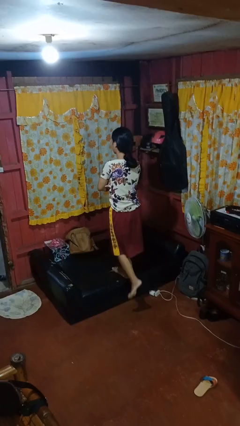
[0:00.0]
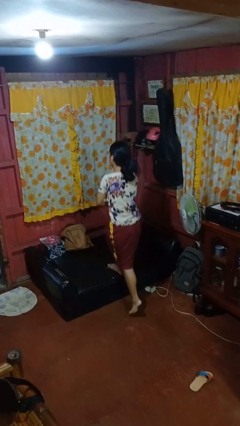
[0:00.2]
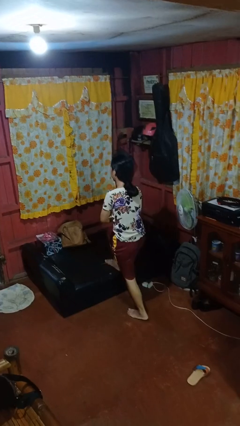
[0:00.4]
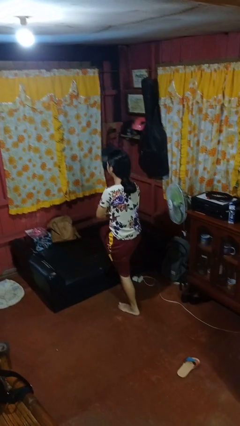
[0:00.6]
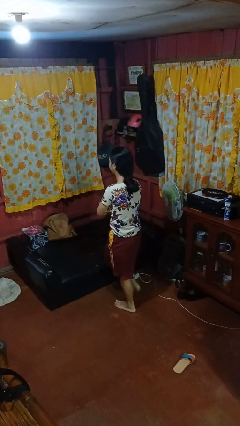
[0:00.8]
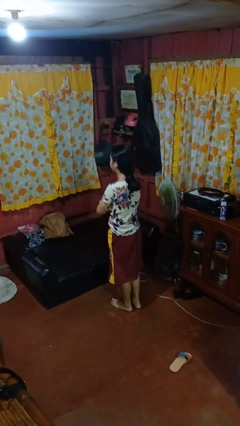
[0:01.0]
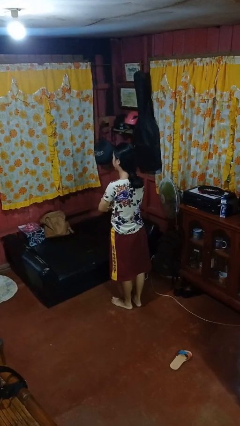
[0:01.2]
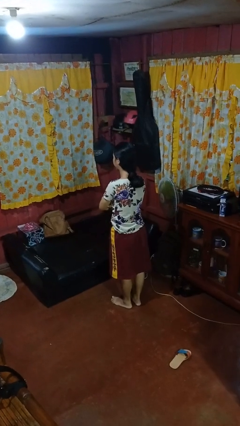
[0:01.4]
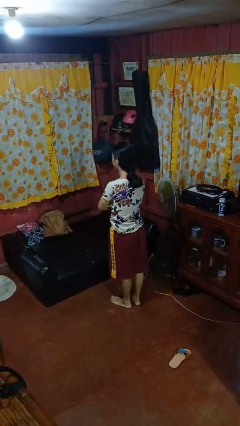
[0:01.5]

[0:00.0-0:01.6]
person climbs off couch

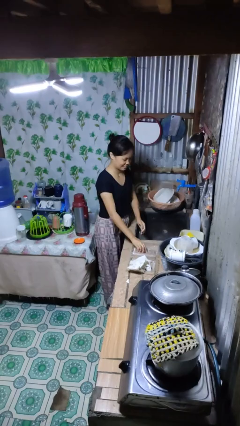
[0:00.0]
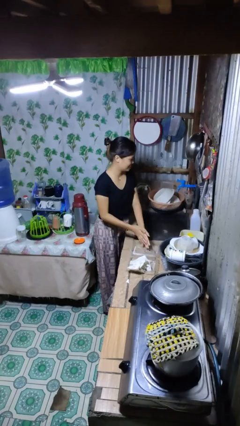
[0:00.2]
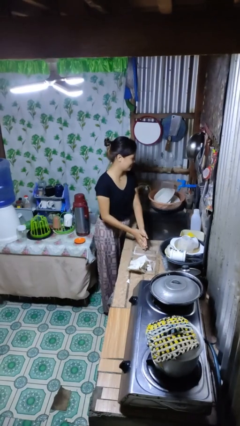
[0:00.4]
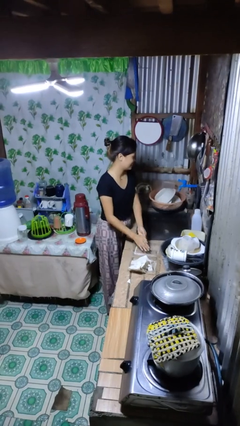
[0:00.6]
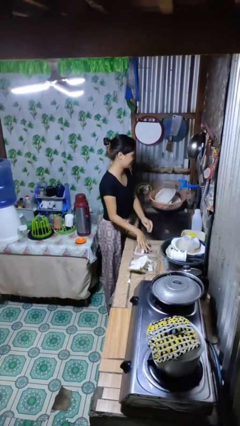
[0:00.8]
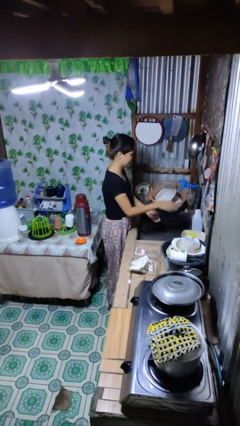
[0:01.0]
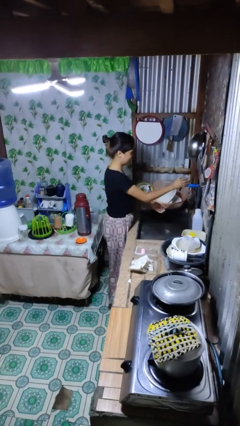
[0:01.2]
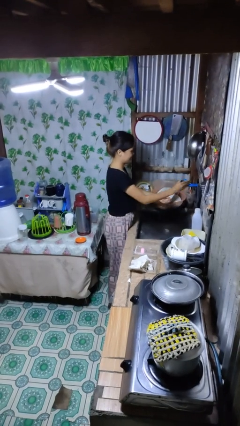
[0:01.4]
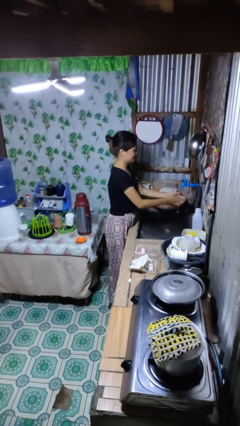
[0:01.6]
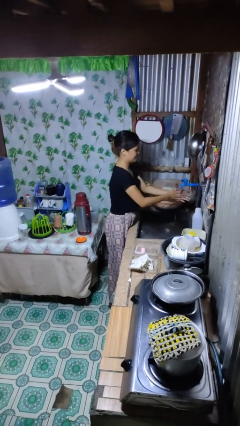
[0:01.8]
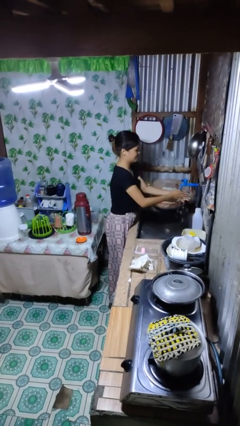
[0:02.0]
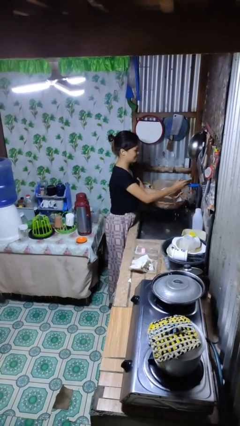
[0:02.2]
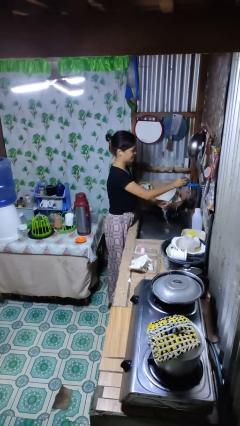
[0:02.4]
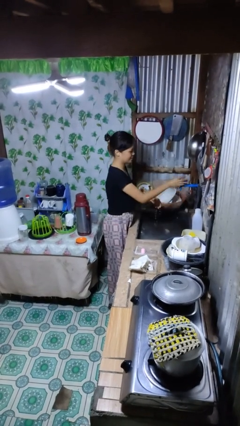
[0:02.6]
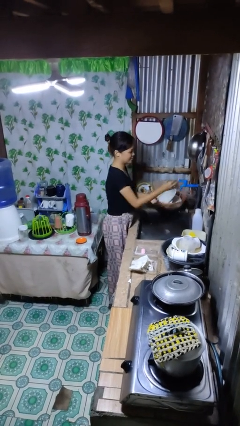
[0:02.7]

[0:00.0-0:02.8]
person washes hands

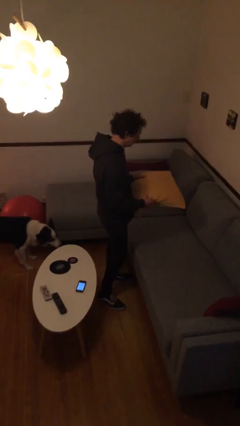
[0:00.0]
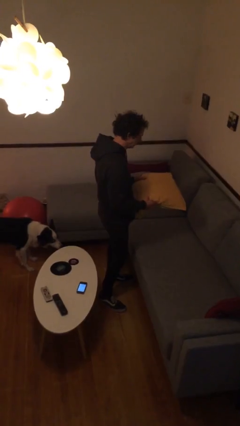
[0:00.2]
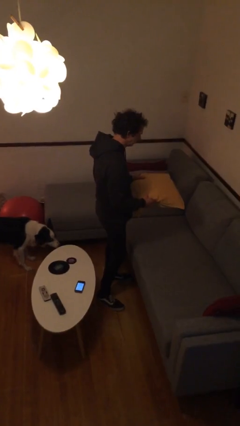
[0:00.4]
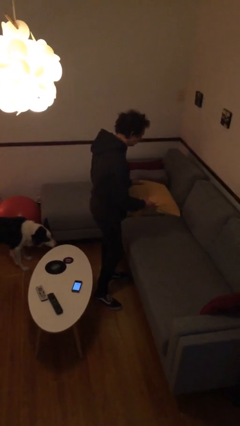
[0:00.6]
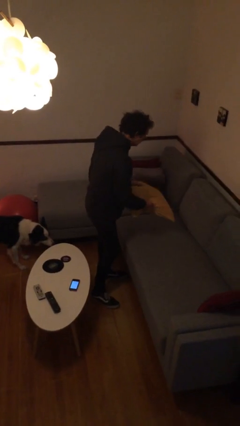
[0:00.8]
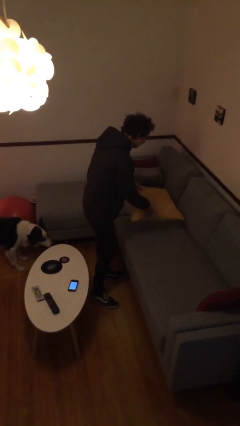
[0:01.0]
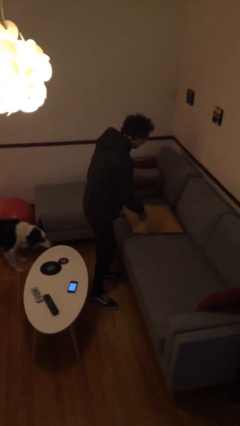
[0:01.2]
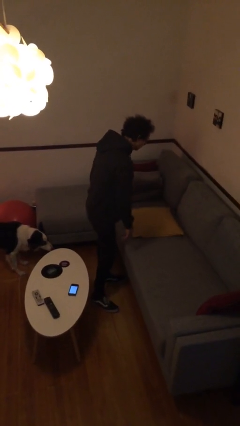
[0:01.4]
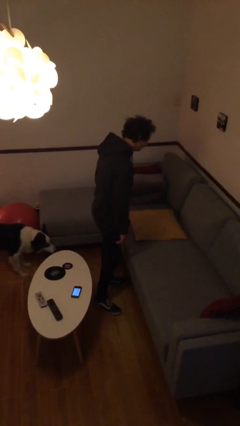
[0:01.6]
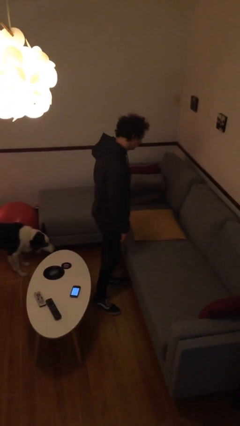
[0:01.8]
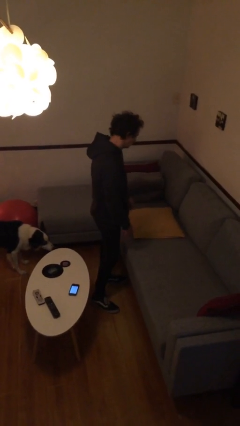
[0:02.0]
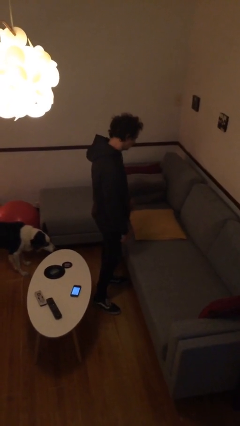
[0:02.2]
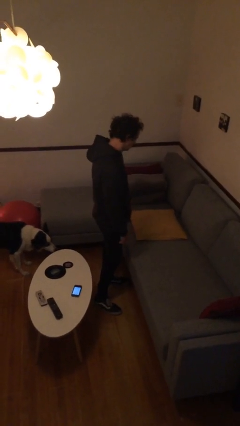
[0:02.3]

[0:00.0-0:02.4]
person puts down object on couch

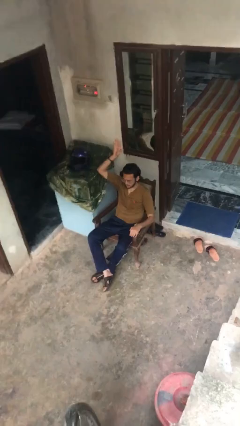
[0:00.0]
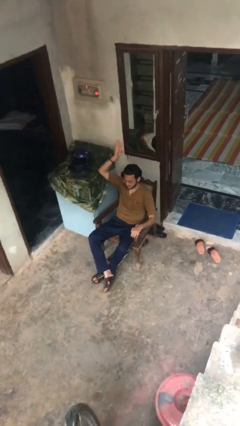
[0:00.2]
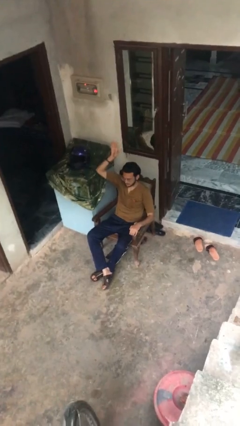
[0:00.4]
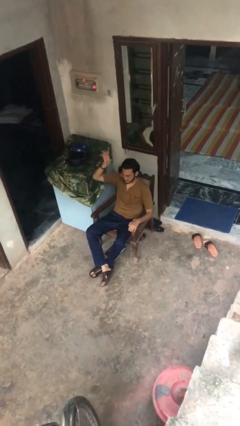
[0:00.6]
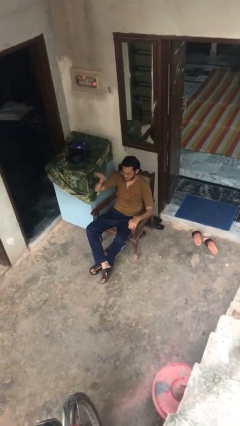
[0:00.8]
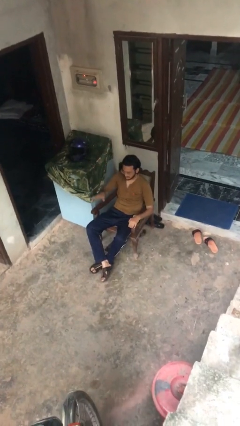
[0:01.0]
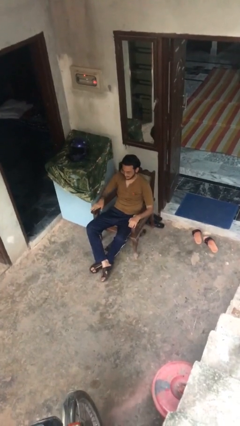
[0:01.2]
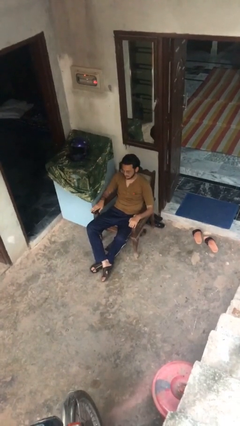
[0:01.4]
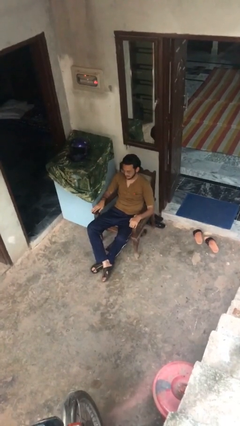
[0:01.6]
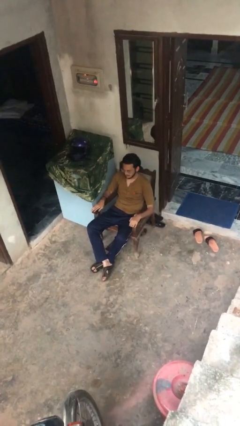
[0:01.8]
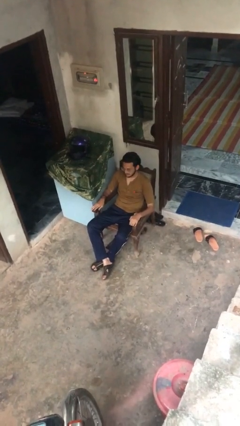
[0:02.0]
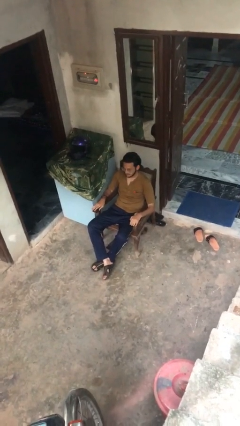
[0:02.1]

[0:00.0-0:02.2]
person gestures lower hand

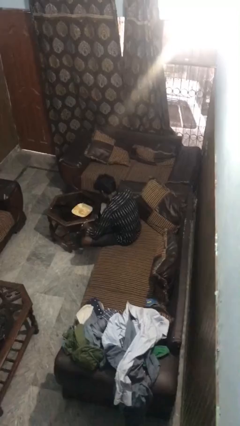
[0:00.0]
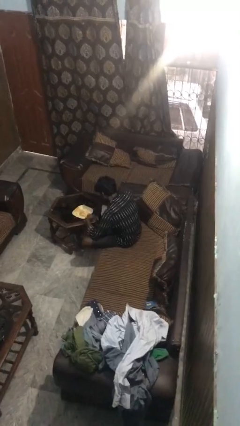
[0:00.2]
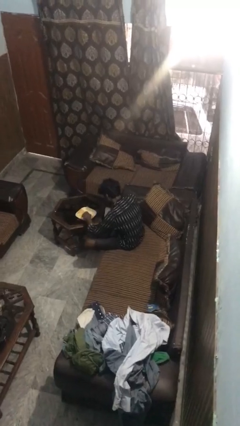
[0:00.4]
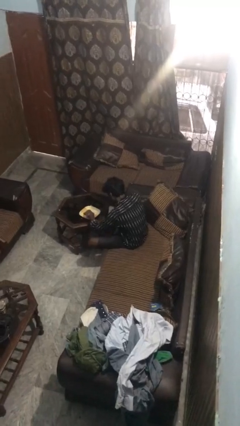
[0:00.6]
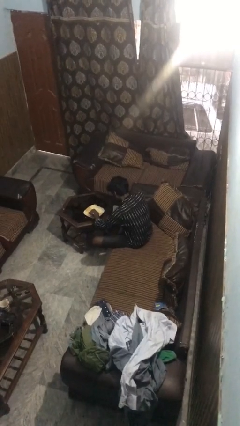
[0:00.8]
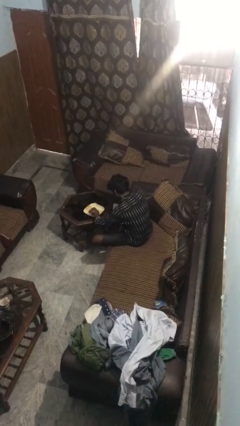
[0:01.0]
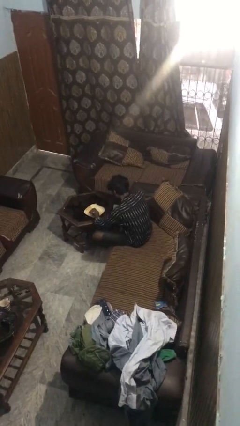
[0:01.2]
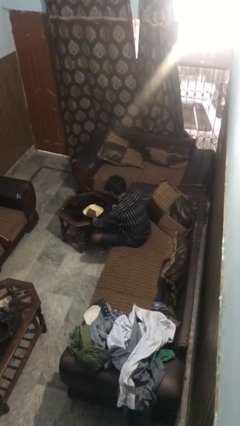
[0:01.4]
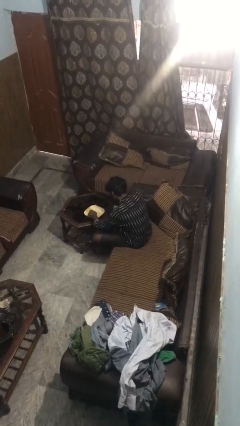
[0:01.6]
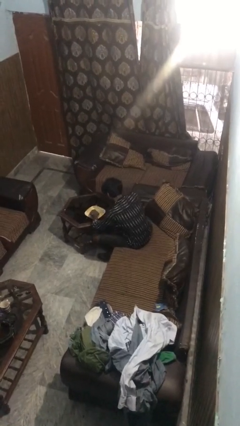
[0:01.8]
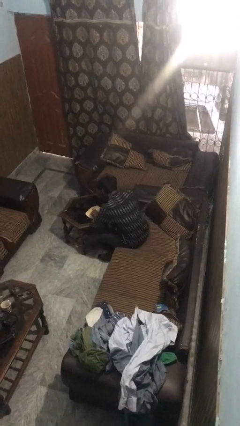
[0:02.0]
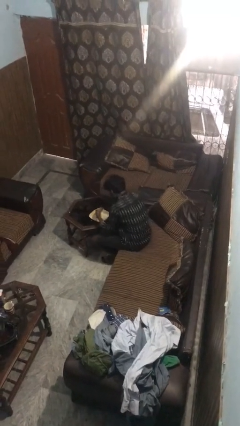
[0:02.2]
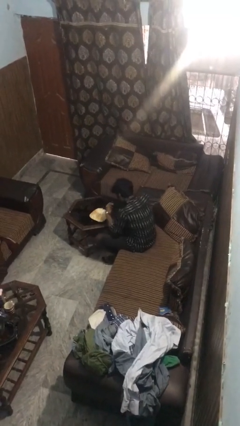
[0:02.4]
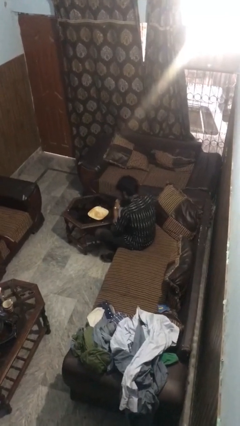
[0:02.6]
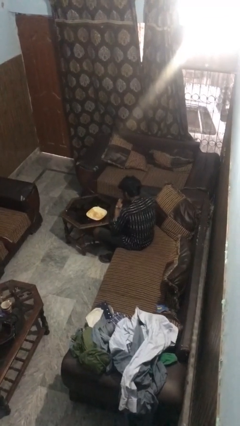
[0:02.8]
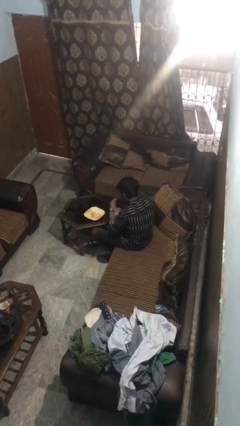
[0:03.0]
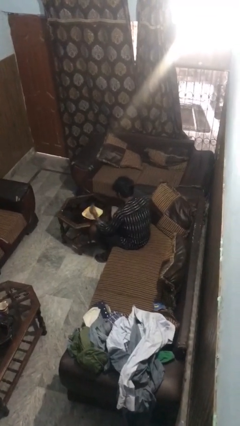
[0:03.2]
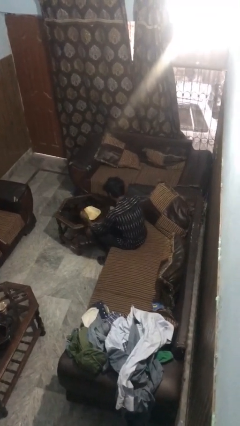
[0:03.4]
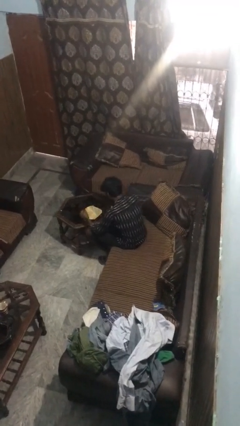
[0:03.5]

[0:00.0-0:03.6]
person eats with hands

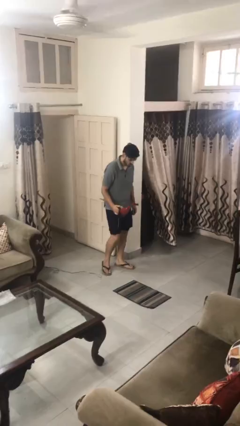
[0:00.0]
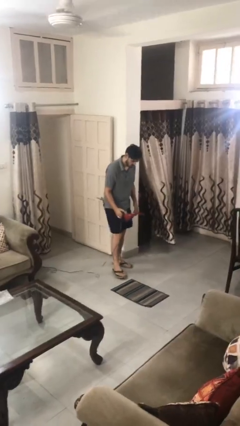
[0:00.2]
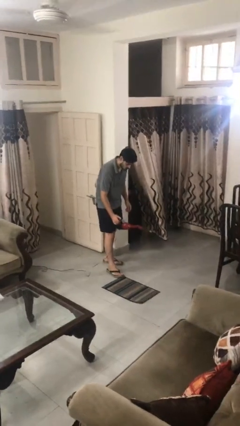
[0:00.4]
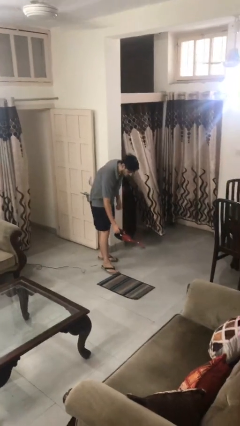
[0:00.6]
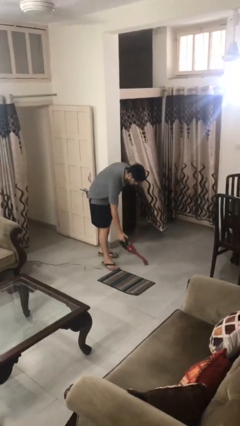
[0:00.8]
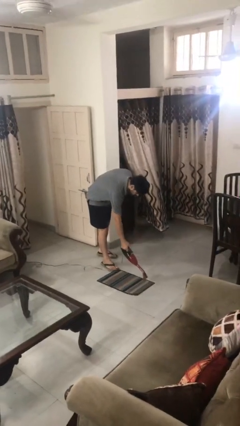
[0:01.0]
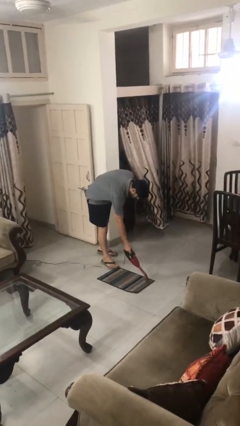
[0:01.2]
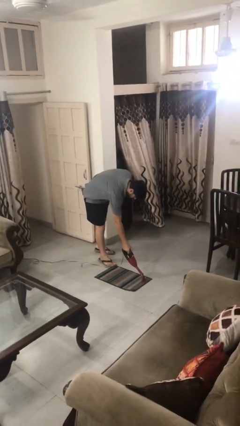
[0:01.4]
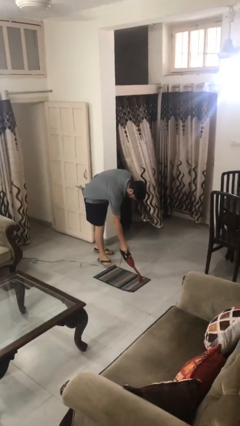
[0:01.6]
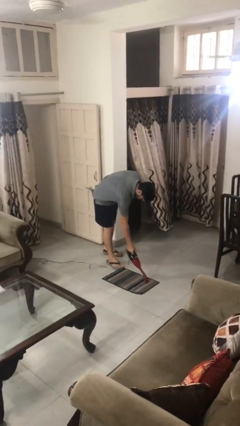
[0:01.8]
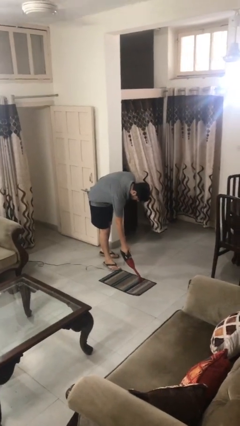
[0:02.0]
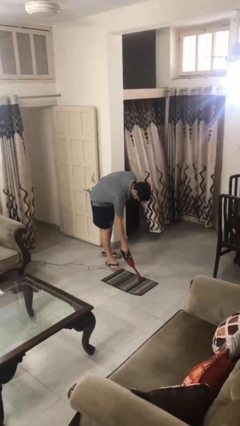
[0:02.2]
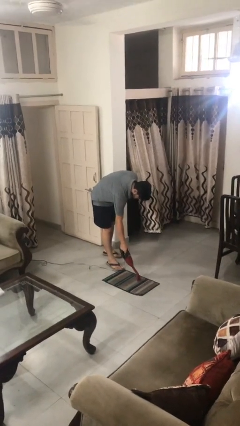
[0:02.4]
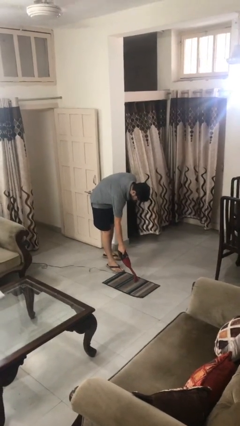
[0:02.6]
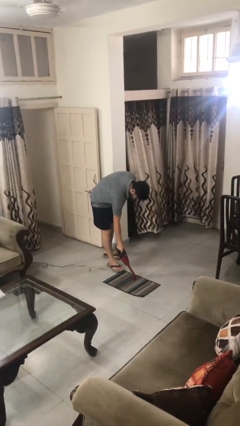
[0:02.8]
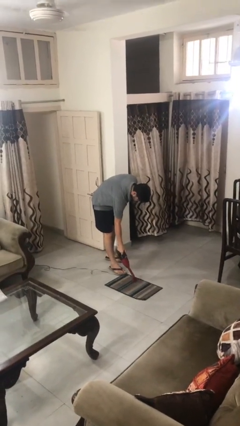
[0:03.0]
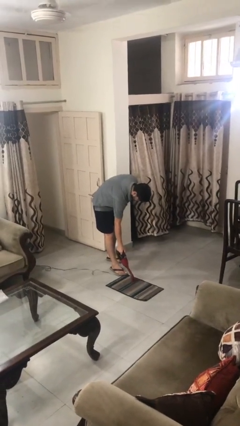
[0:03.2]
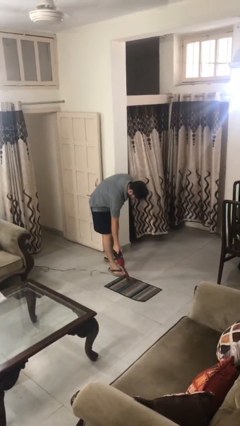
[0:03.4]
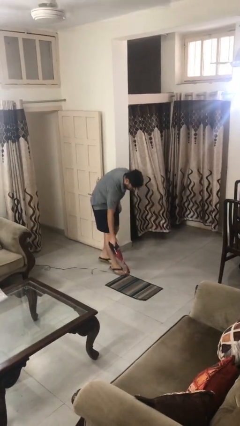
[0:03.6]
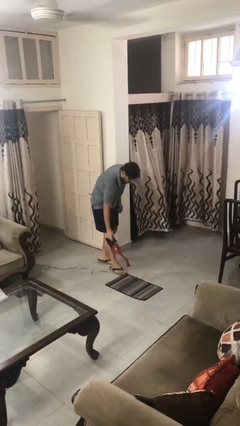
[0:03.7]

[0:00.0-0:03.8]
person vacuums carpet

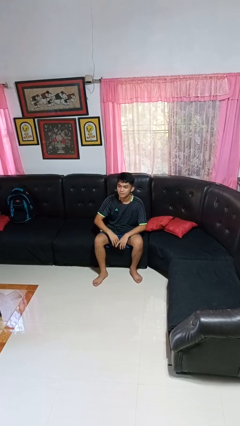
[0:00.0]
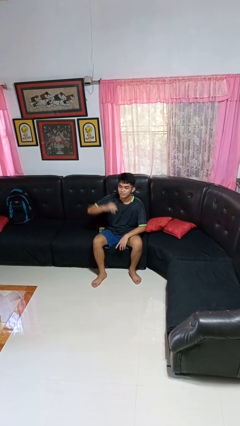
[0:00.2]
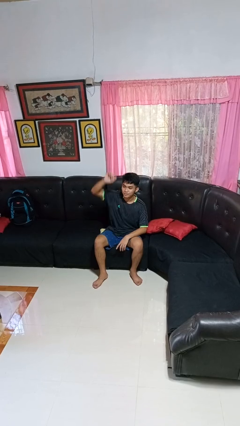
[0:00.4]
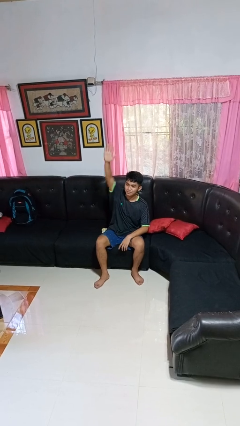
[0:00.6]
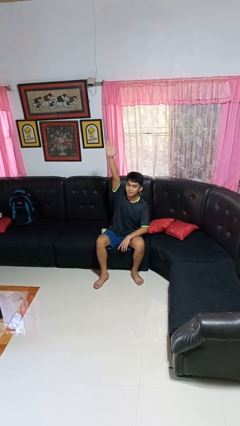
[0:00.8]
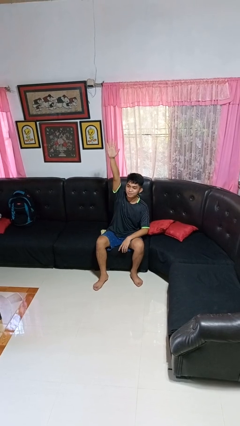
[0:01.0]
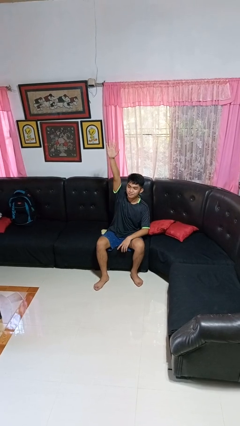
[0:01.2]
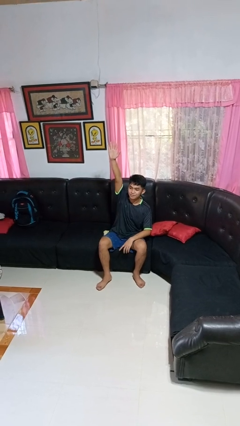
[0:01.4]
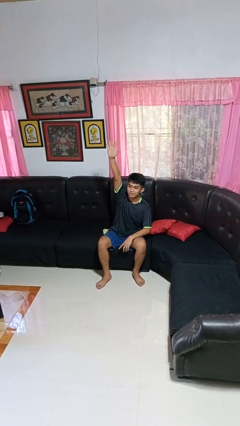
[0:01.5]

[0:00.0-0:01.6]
person gestures raise hand
